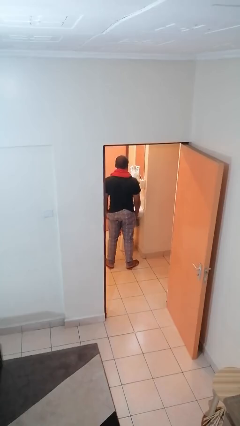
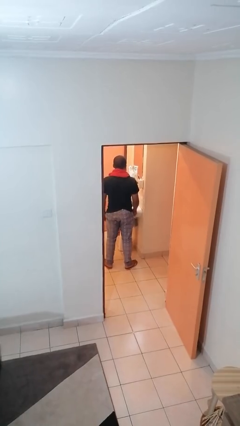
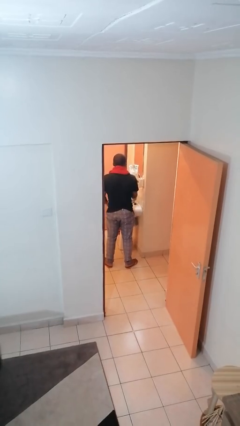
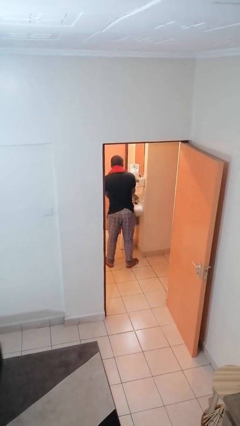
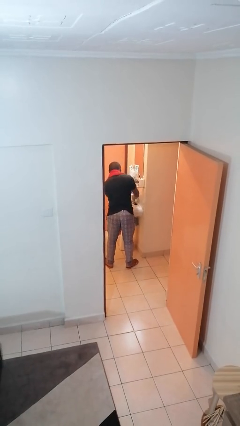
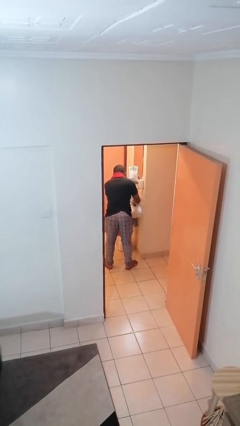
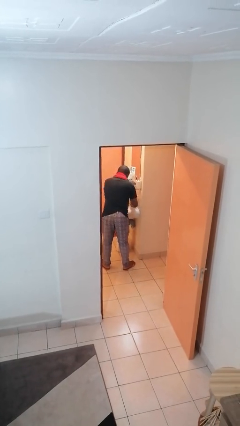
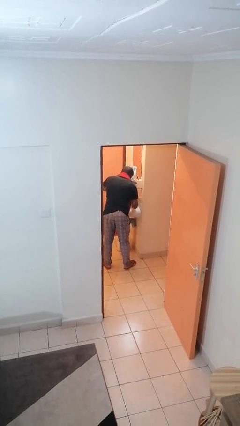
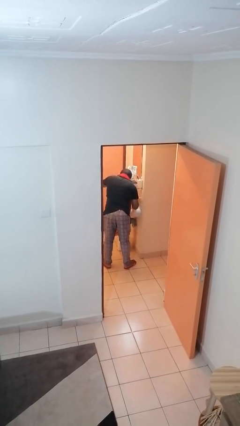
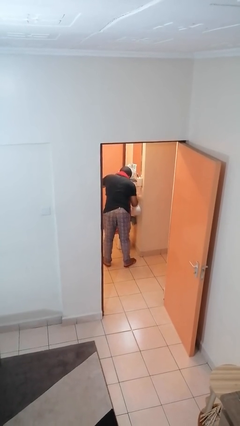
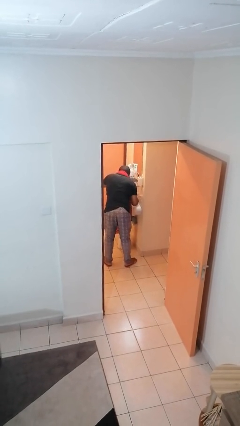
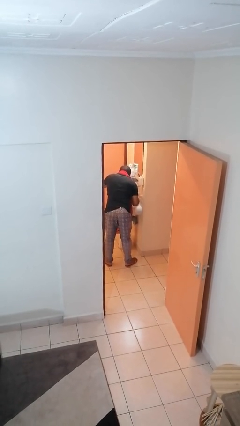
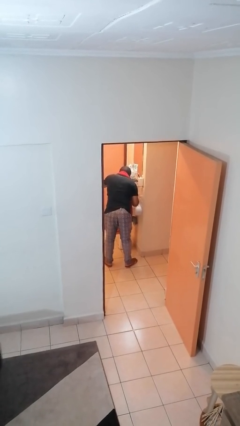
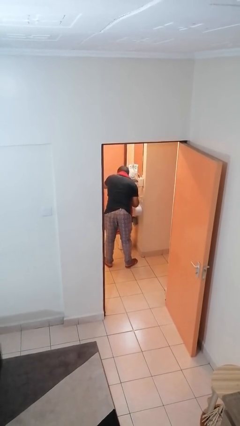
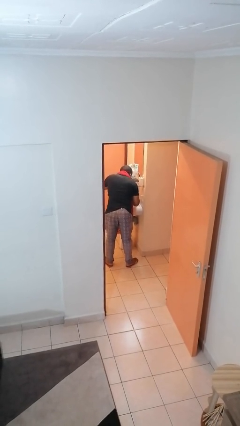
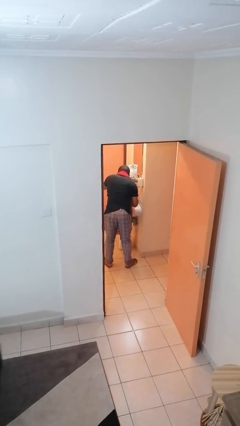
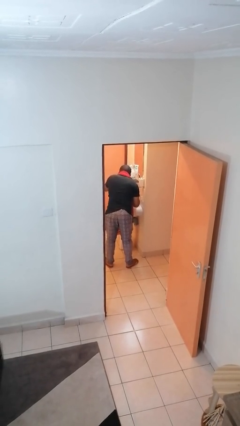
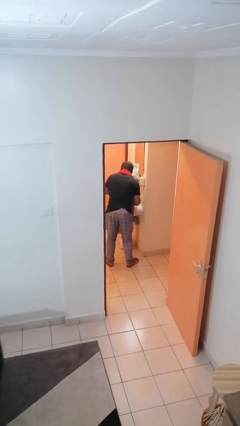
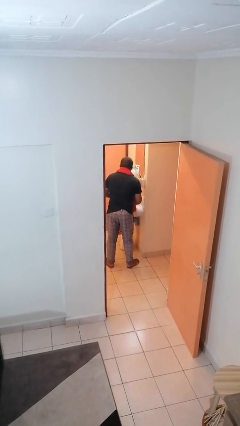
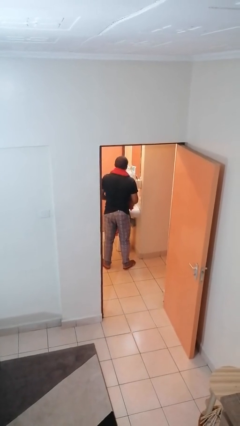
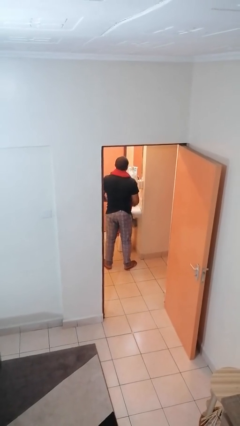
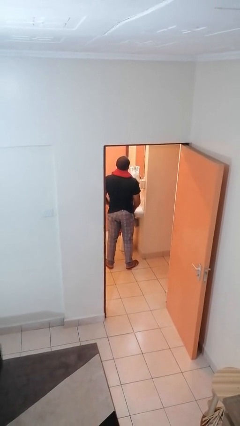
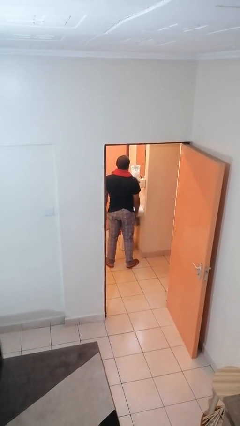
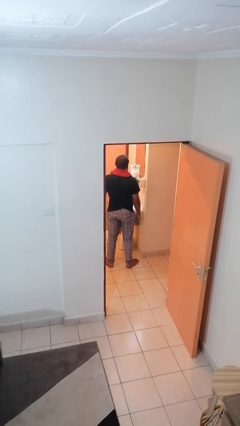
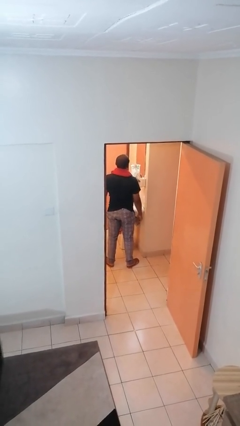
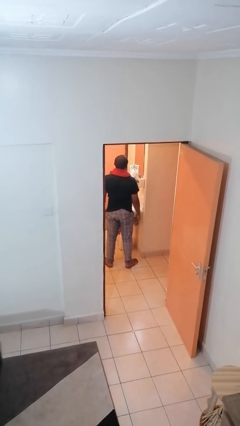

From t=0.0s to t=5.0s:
person washes face

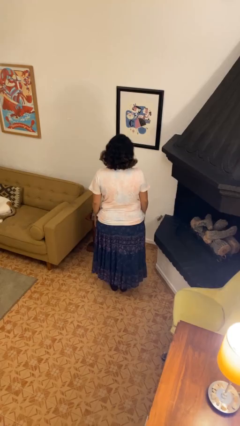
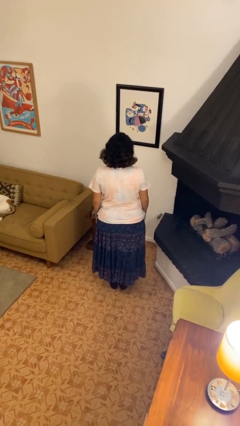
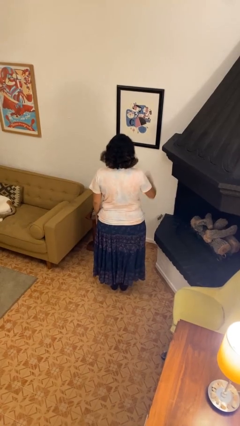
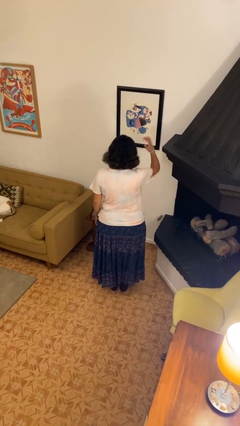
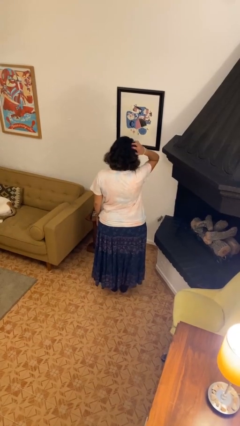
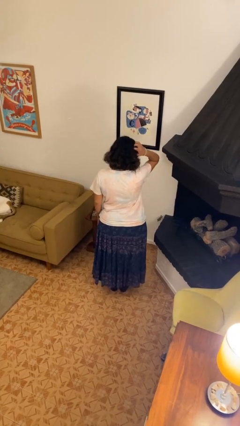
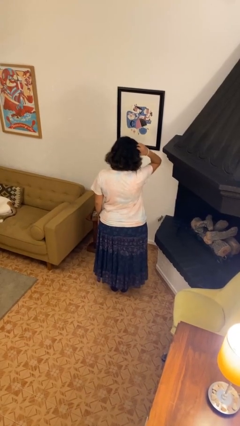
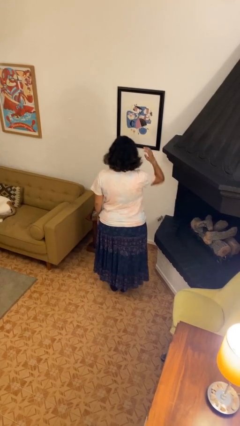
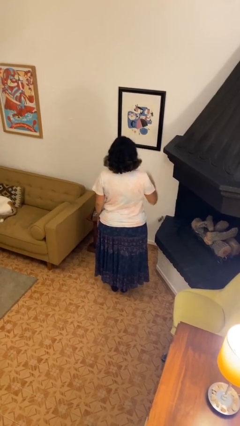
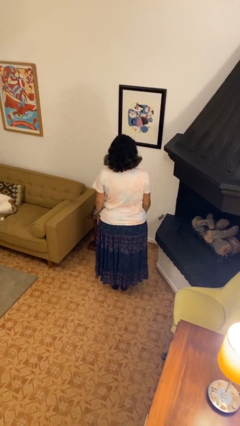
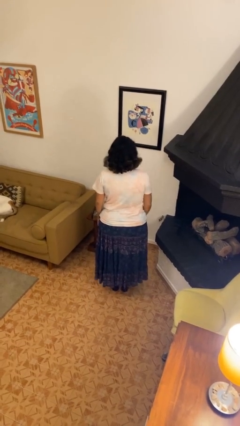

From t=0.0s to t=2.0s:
person scratches face

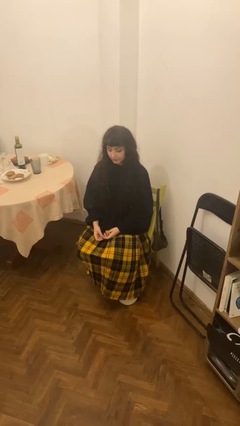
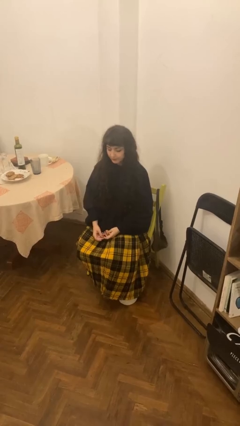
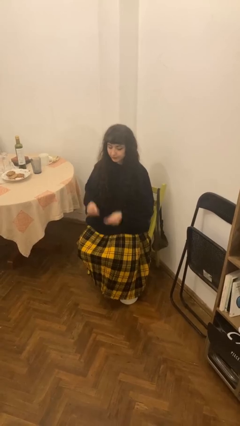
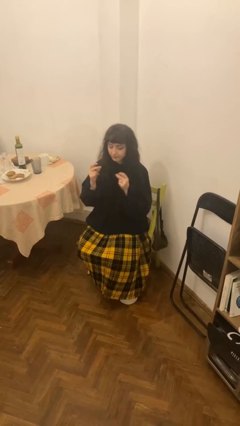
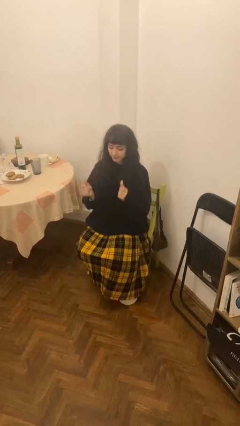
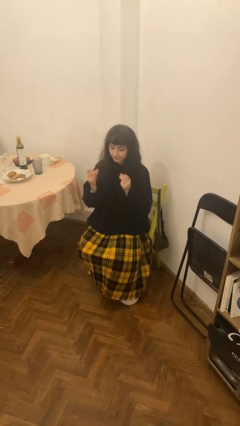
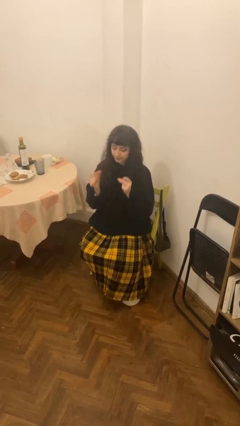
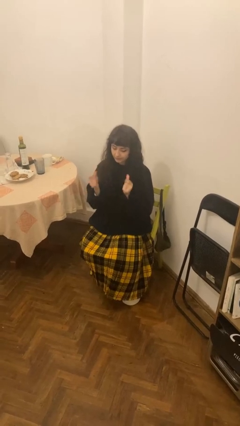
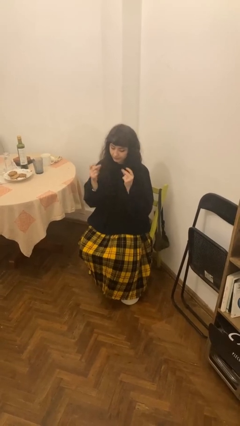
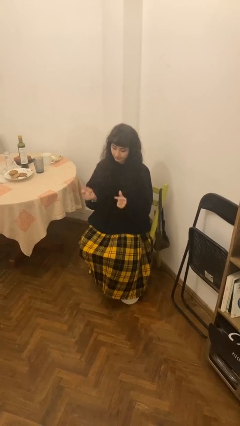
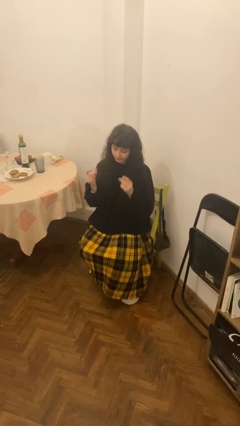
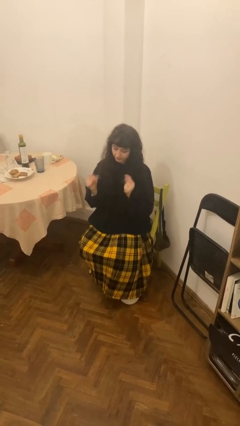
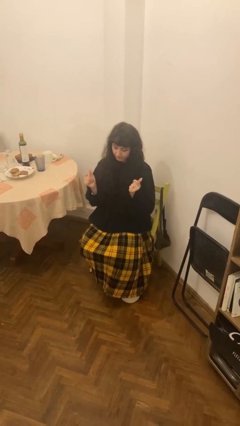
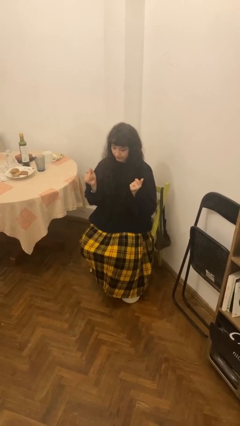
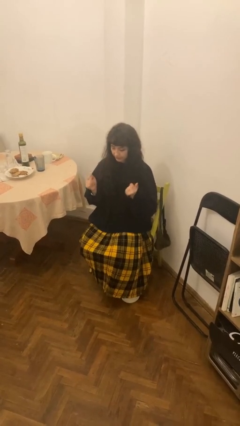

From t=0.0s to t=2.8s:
person snaps fingers

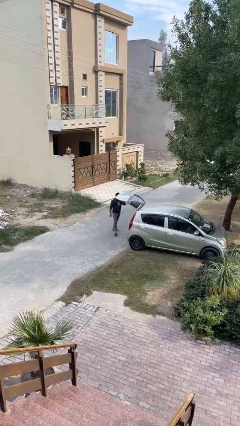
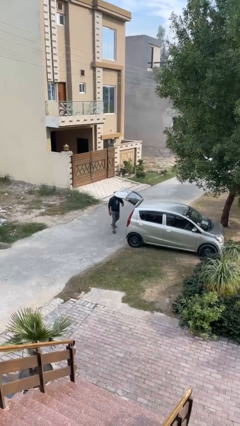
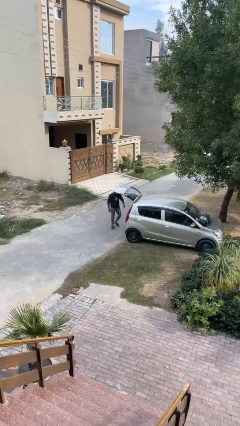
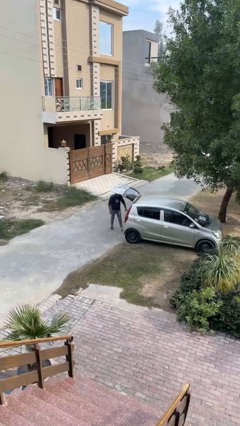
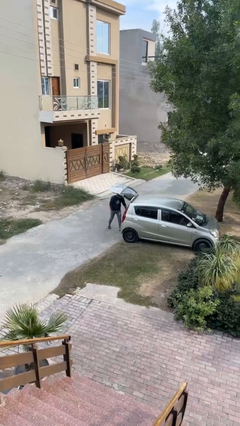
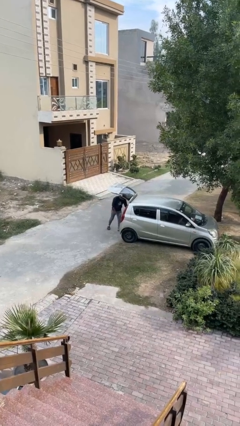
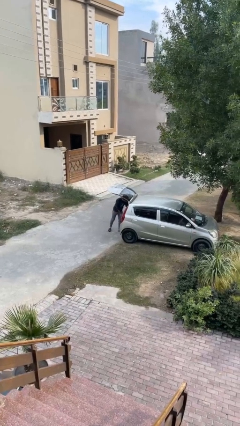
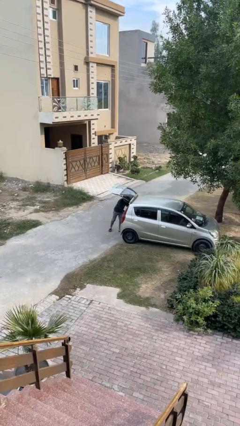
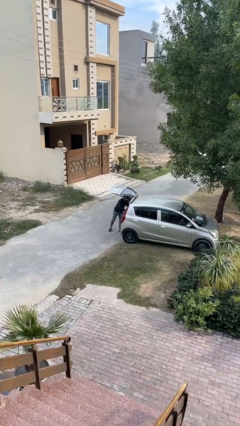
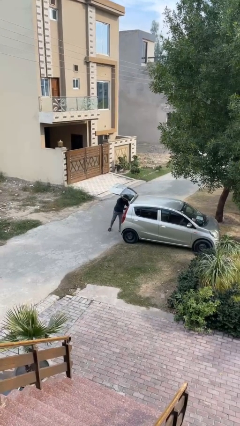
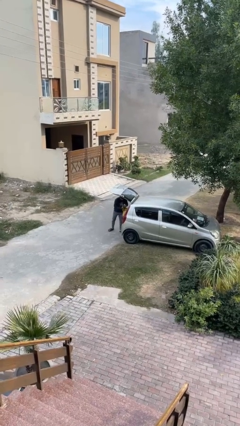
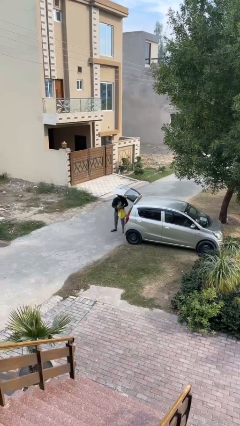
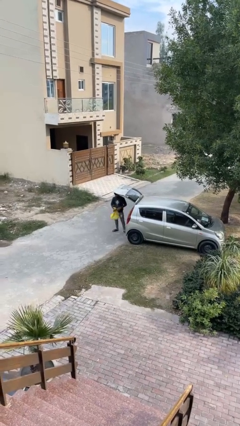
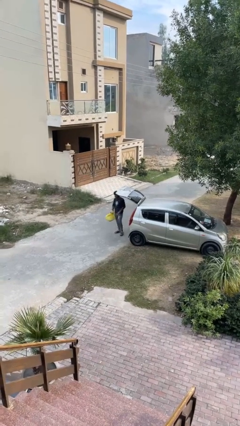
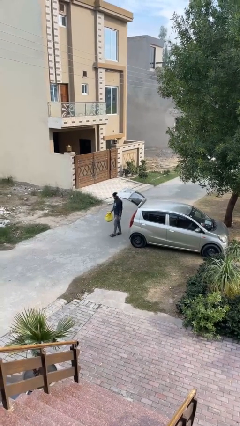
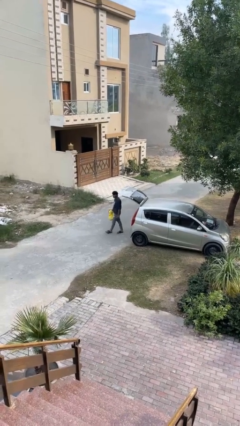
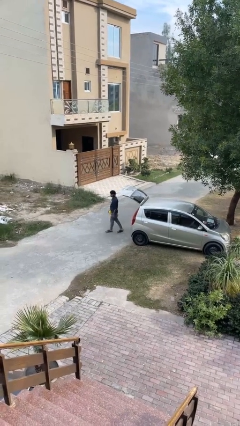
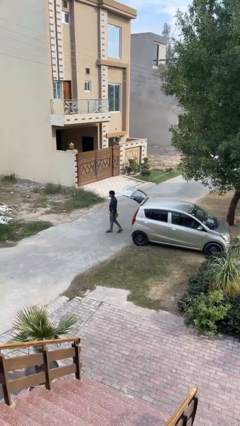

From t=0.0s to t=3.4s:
person unloads car

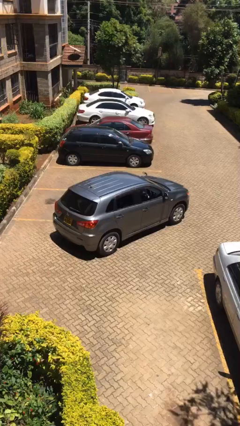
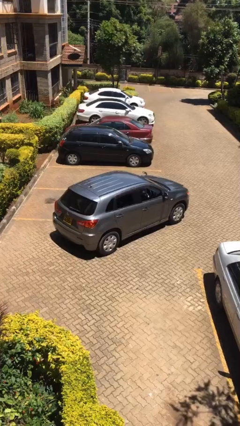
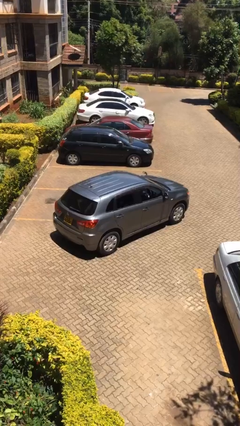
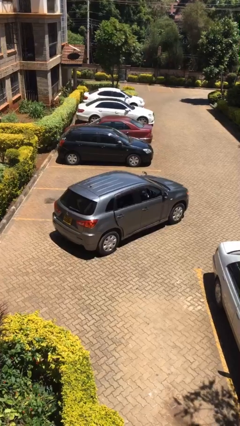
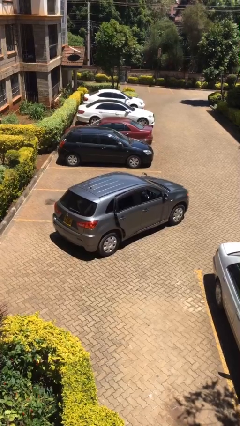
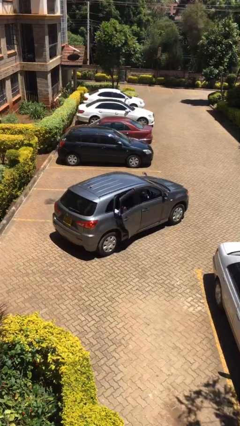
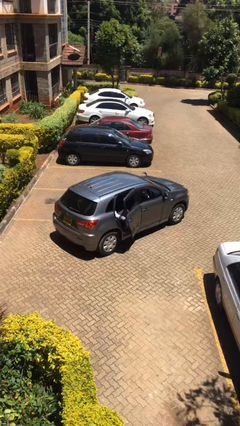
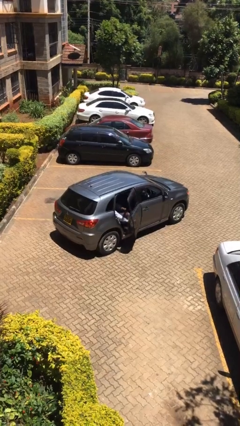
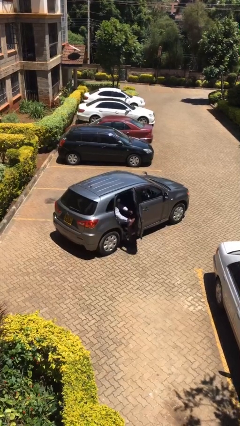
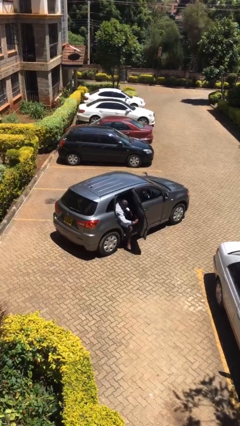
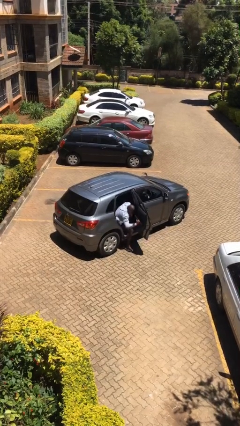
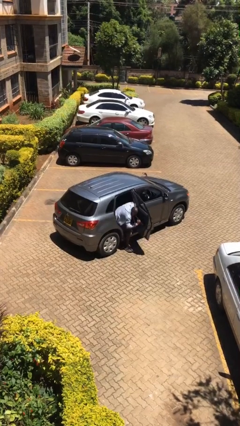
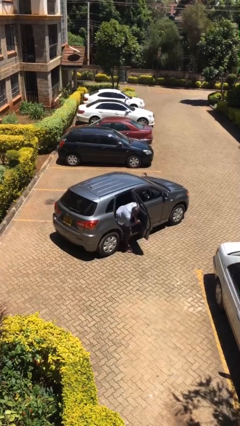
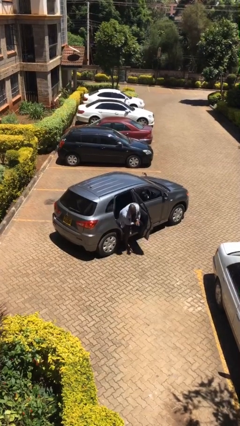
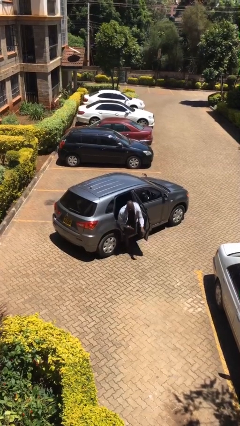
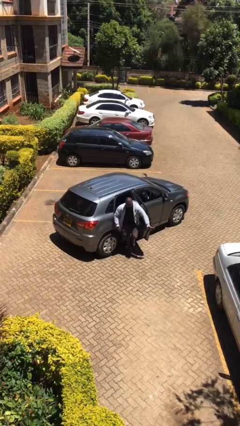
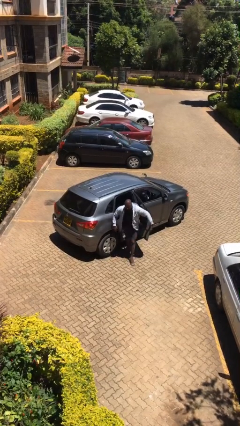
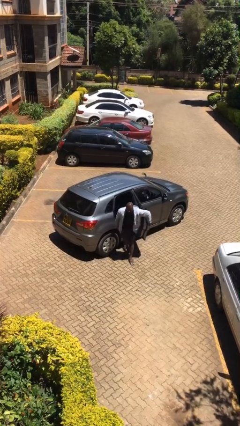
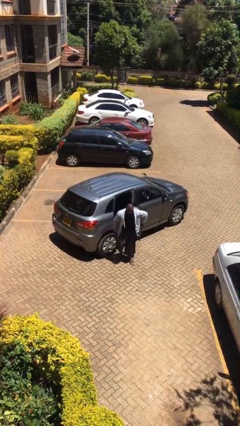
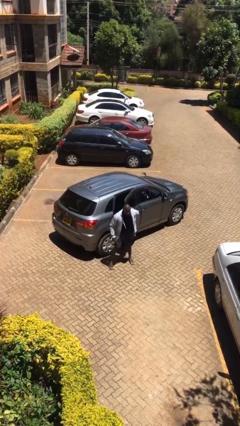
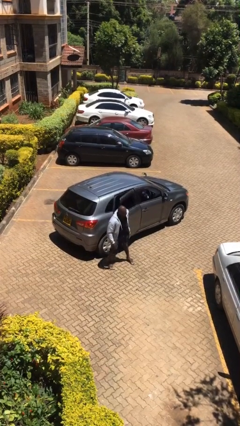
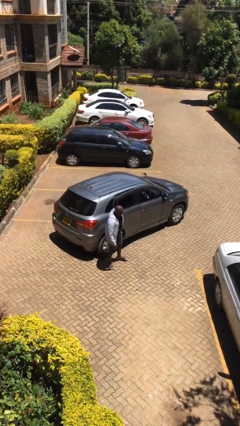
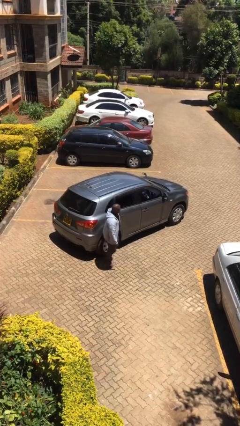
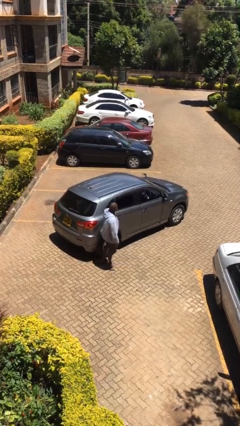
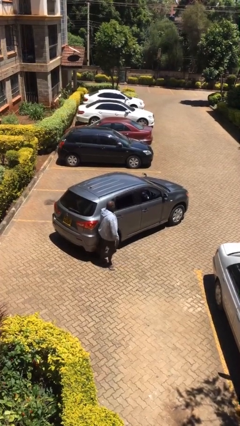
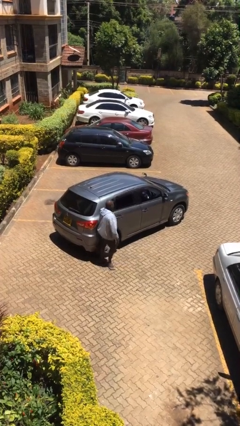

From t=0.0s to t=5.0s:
car drops off person
